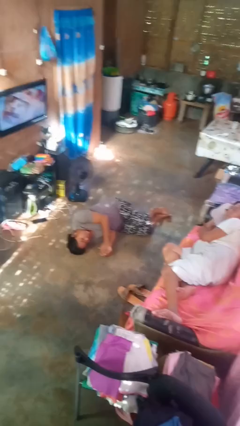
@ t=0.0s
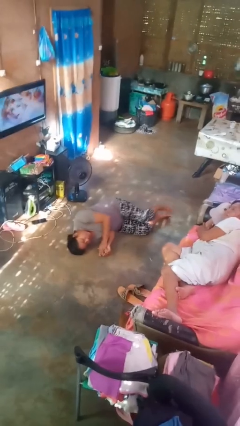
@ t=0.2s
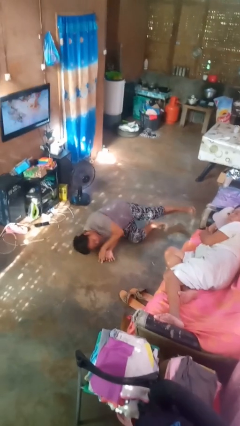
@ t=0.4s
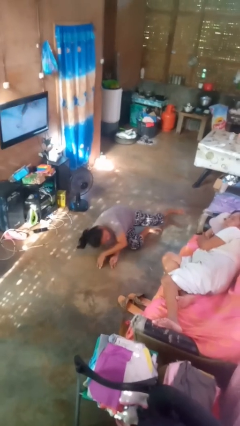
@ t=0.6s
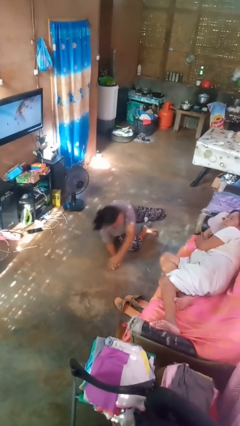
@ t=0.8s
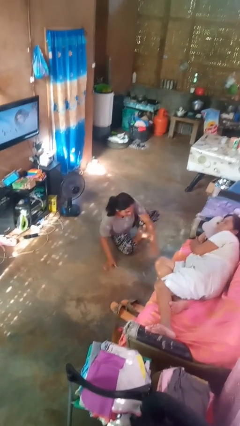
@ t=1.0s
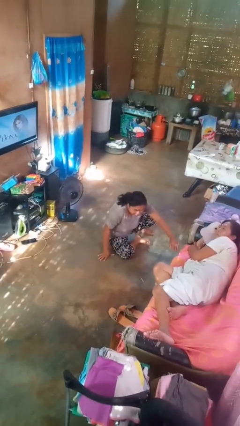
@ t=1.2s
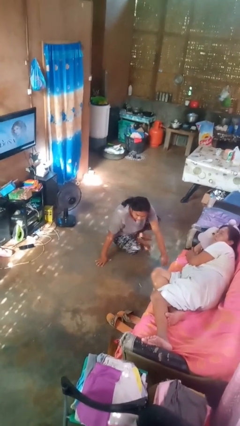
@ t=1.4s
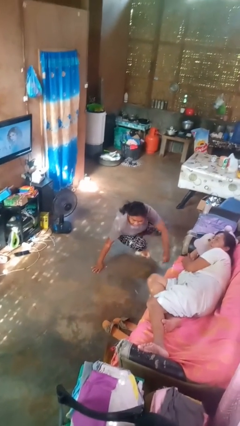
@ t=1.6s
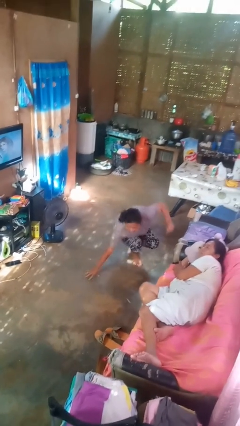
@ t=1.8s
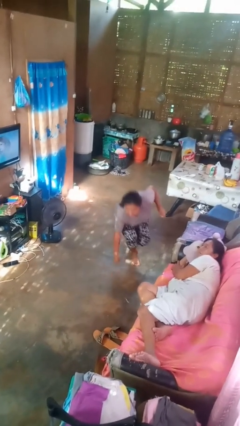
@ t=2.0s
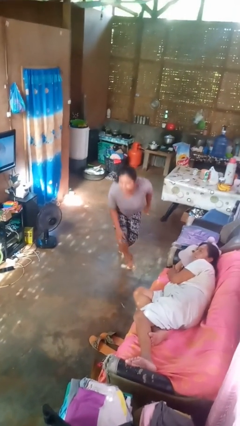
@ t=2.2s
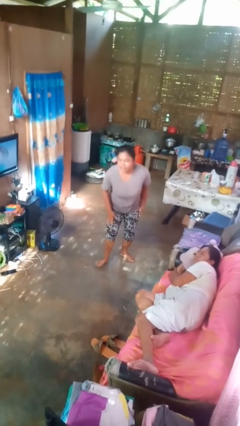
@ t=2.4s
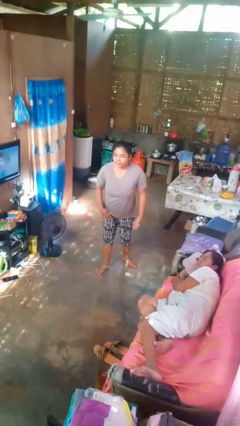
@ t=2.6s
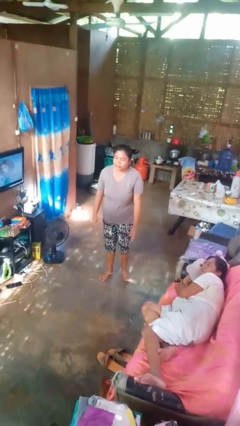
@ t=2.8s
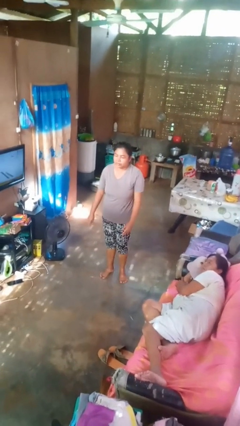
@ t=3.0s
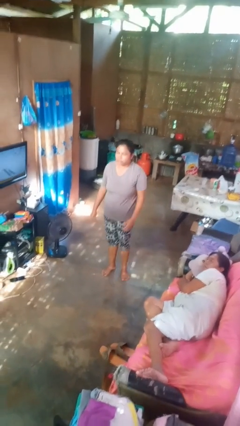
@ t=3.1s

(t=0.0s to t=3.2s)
person stands up from floor

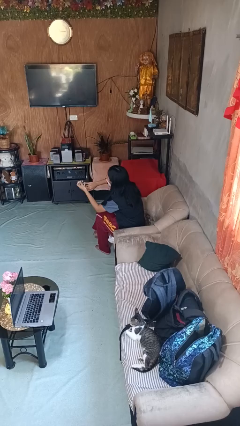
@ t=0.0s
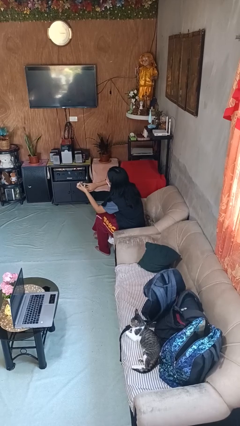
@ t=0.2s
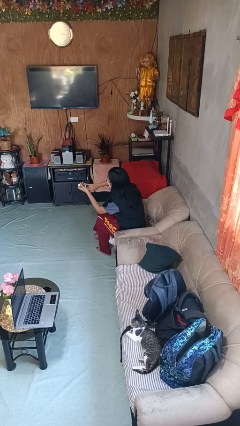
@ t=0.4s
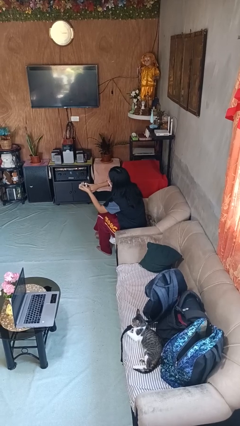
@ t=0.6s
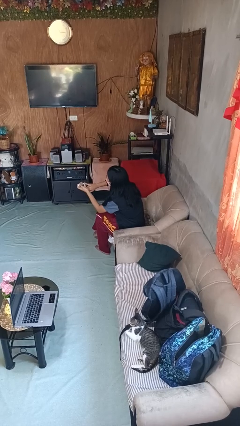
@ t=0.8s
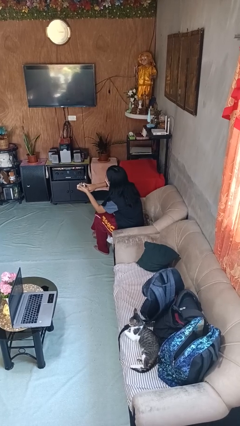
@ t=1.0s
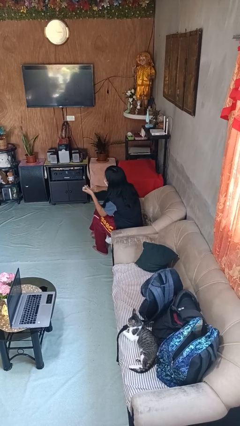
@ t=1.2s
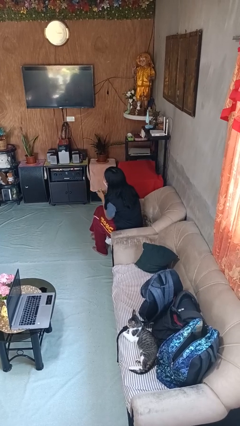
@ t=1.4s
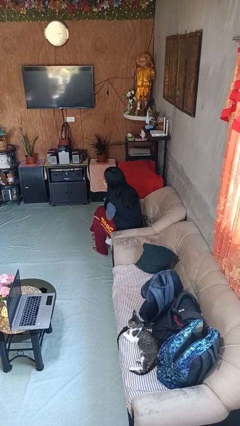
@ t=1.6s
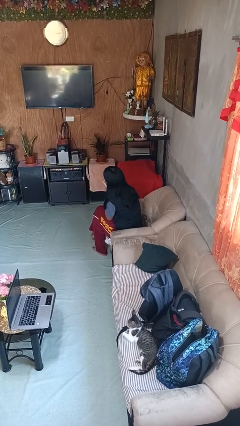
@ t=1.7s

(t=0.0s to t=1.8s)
person clips fingernails

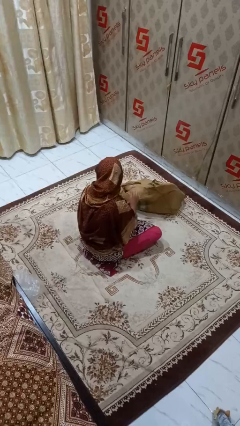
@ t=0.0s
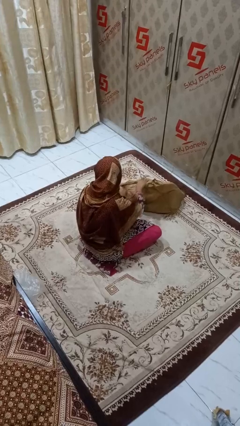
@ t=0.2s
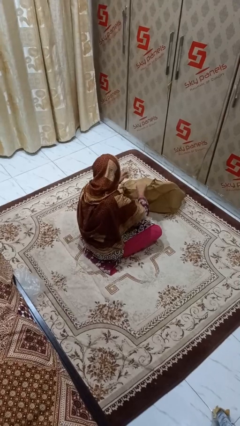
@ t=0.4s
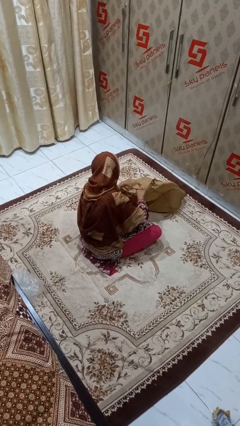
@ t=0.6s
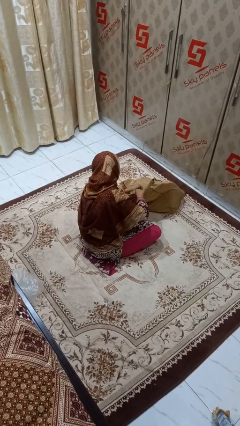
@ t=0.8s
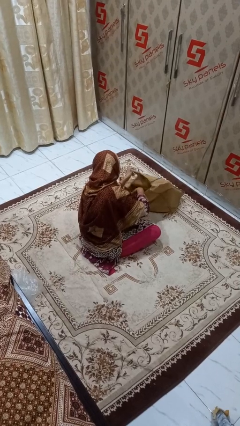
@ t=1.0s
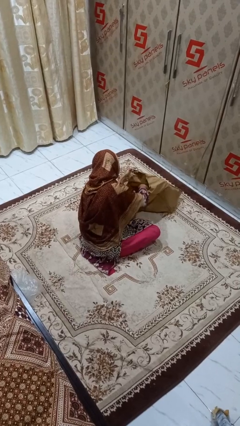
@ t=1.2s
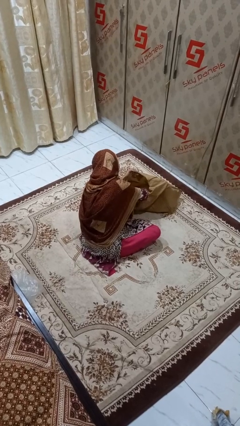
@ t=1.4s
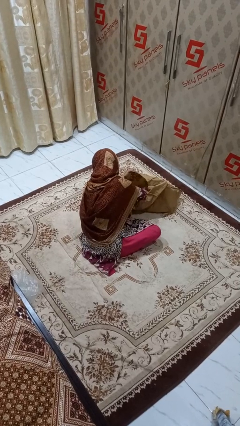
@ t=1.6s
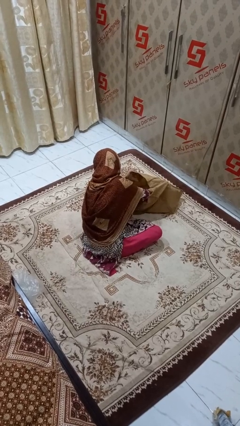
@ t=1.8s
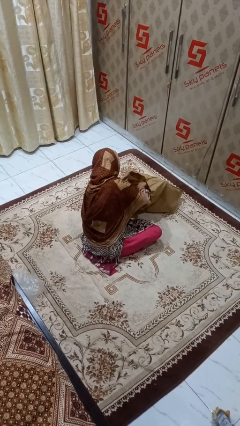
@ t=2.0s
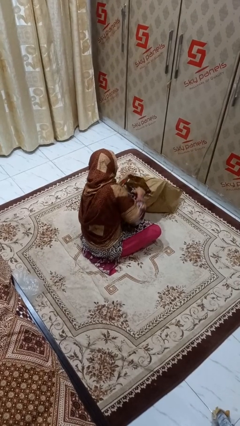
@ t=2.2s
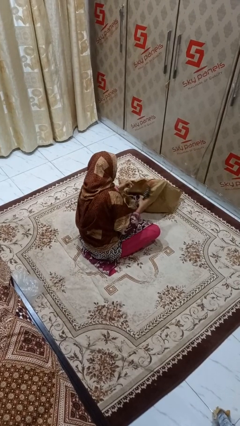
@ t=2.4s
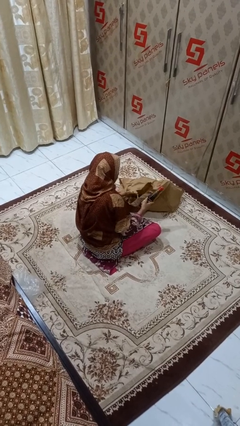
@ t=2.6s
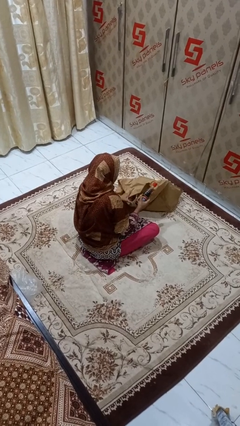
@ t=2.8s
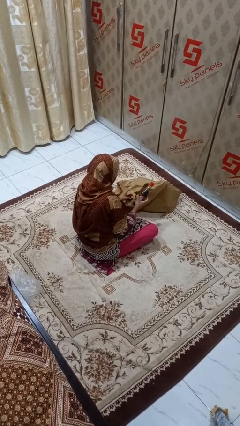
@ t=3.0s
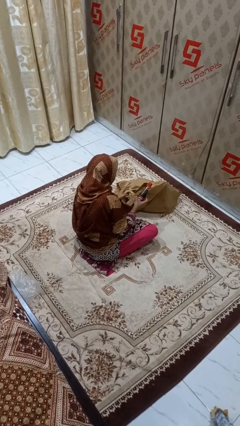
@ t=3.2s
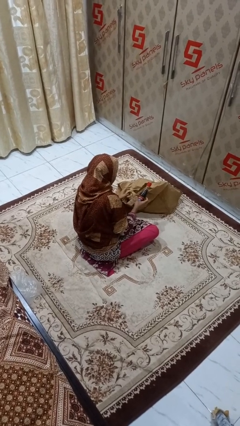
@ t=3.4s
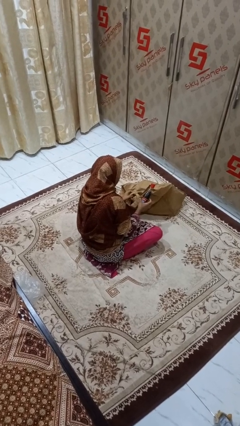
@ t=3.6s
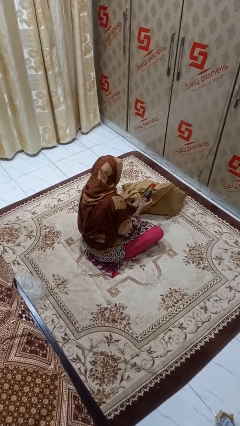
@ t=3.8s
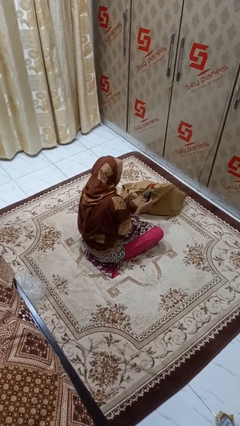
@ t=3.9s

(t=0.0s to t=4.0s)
person takes object from bag

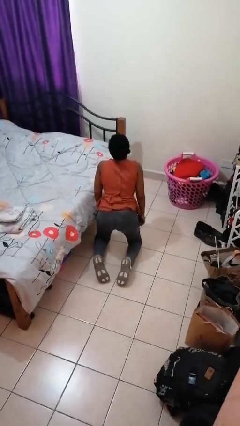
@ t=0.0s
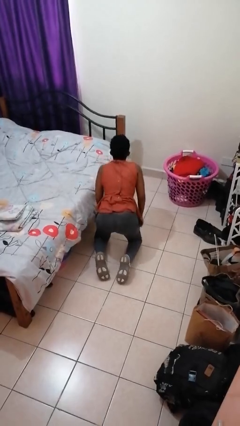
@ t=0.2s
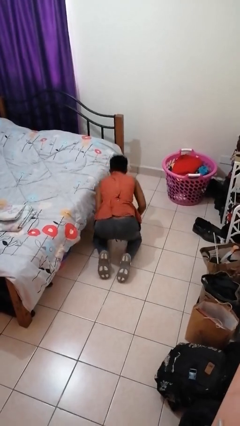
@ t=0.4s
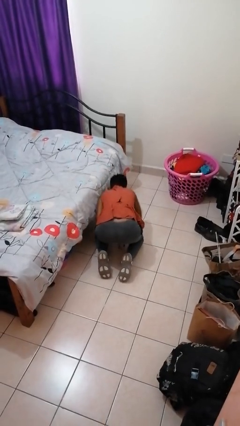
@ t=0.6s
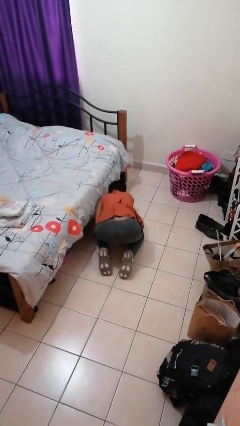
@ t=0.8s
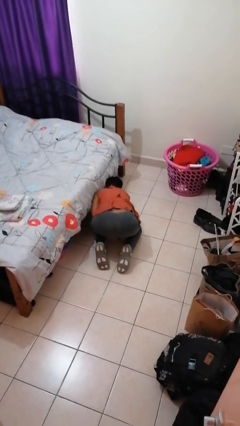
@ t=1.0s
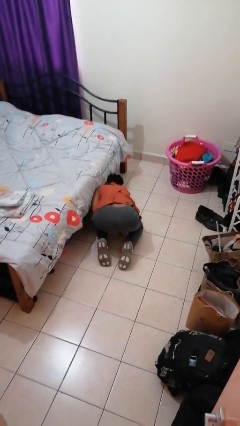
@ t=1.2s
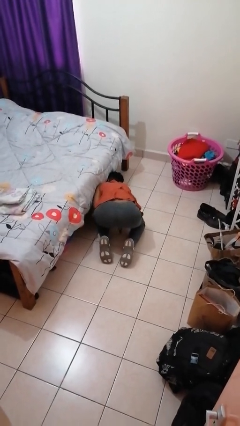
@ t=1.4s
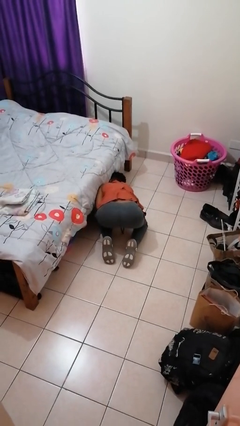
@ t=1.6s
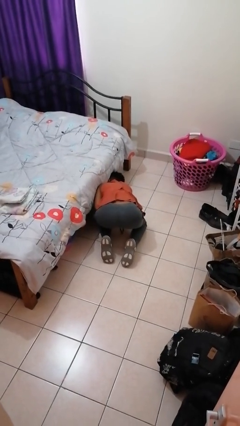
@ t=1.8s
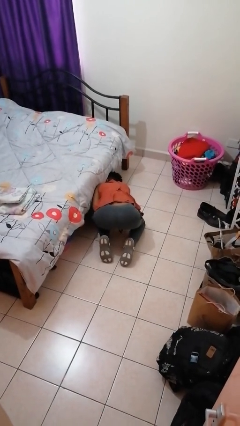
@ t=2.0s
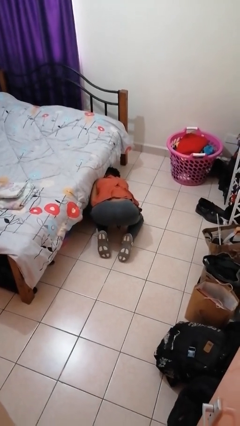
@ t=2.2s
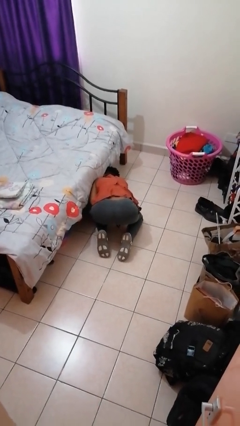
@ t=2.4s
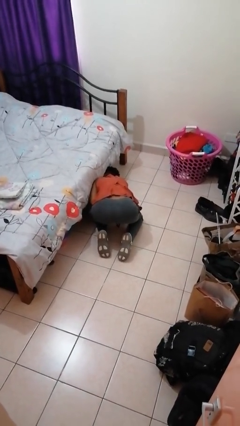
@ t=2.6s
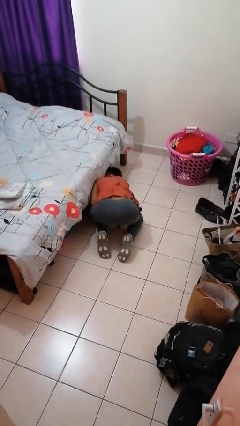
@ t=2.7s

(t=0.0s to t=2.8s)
person searches under bed

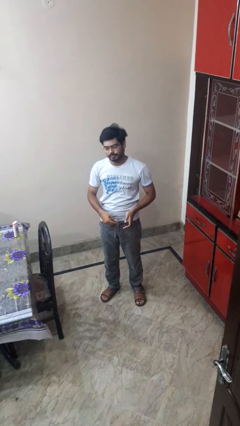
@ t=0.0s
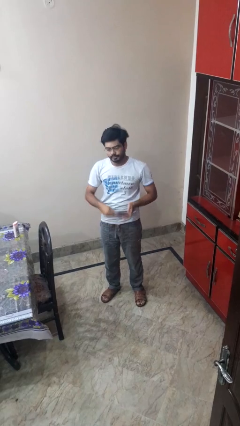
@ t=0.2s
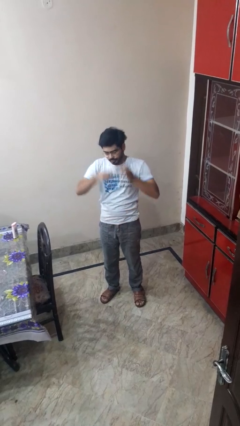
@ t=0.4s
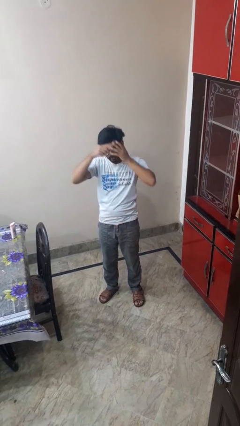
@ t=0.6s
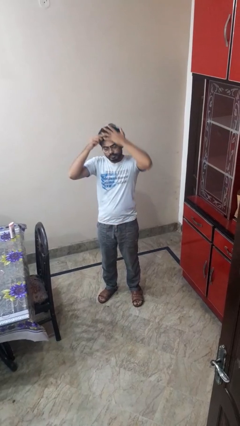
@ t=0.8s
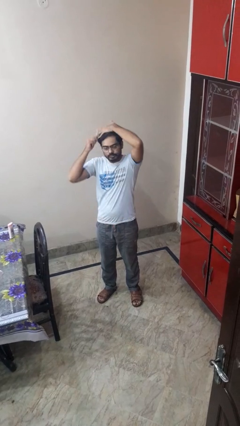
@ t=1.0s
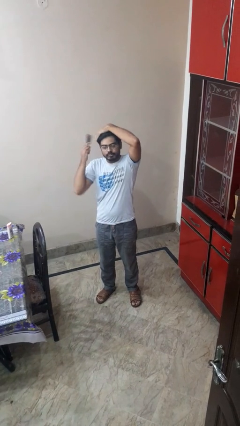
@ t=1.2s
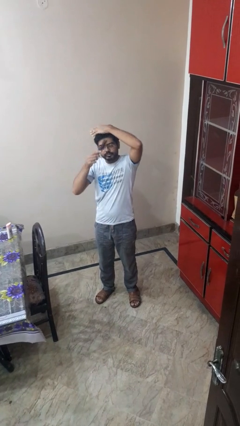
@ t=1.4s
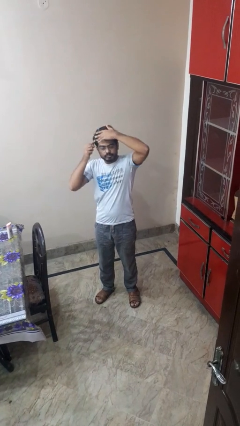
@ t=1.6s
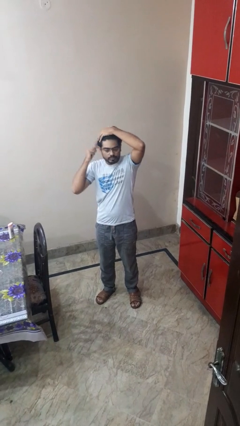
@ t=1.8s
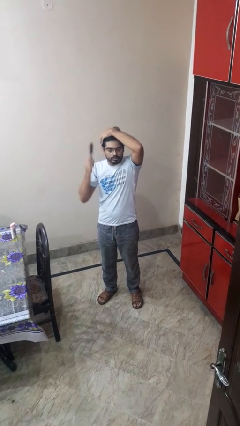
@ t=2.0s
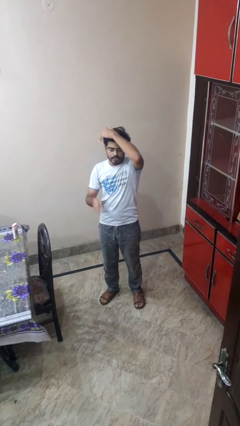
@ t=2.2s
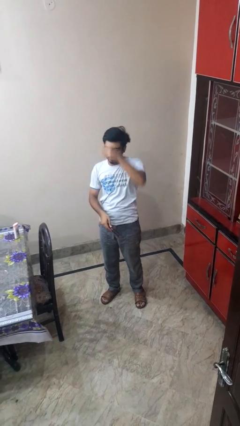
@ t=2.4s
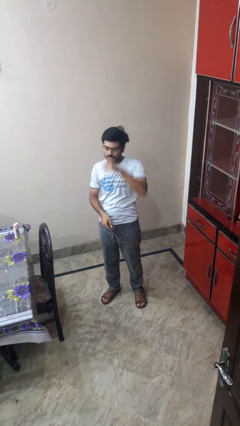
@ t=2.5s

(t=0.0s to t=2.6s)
person brushes hair

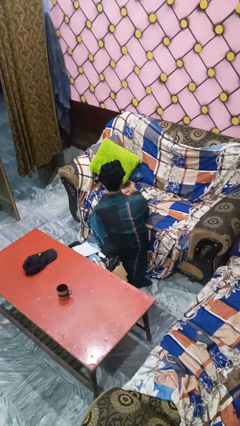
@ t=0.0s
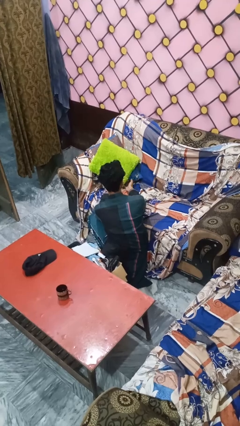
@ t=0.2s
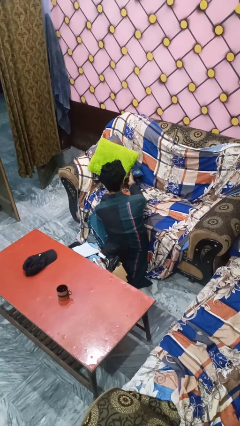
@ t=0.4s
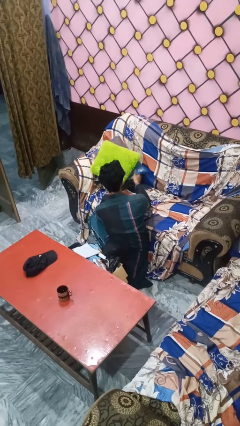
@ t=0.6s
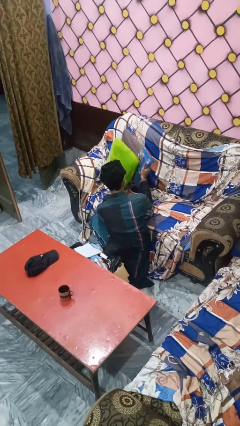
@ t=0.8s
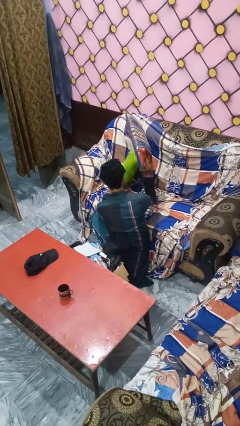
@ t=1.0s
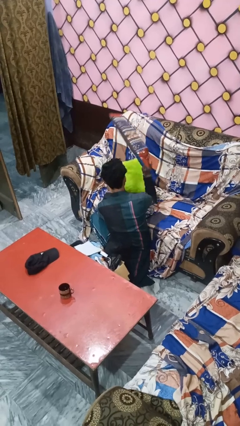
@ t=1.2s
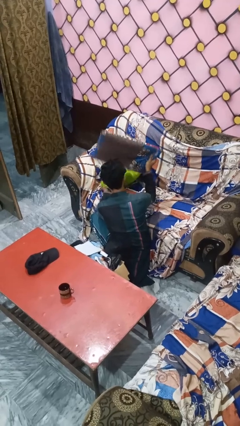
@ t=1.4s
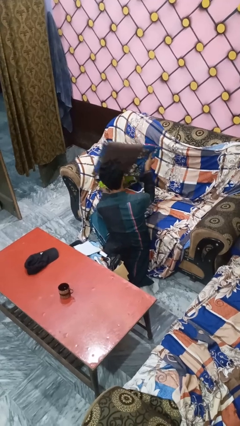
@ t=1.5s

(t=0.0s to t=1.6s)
person searches in couch

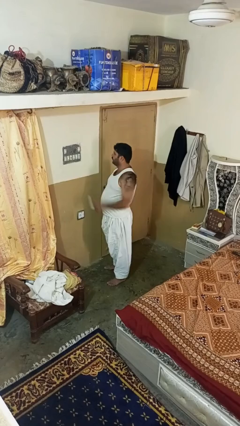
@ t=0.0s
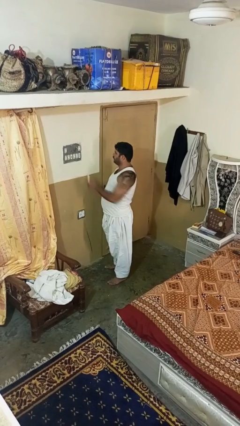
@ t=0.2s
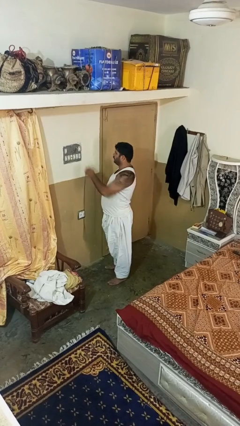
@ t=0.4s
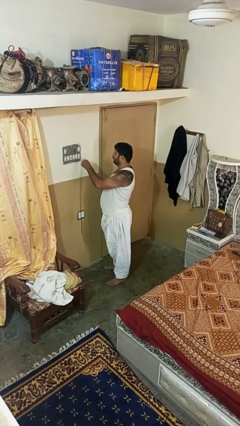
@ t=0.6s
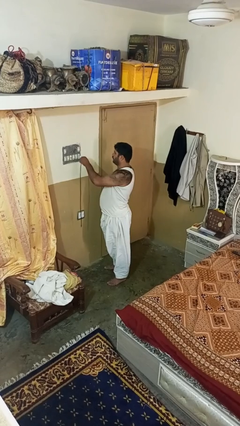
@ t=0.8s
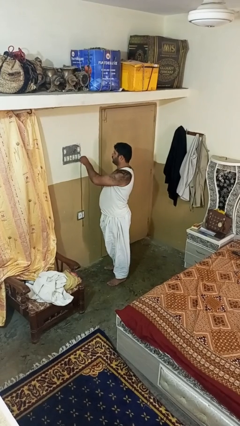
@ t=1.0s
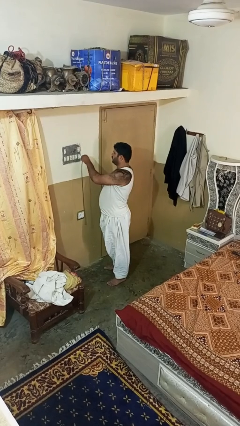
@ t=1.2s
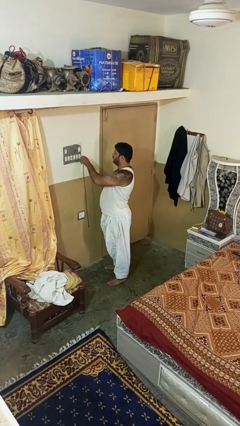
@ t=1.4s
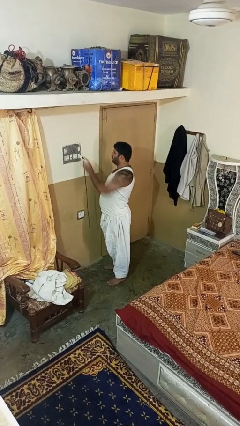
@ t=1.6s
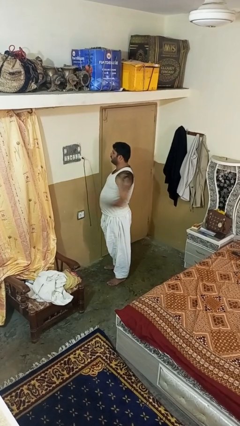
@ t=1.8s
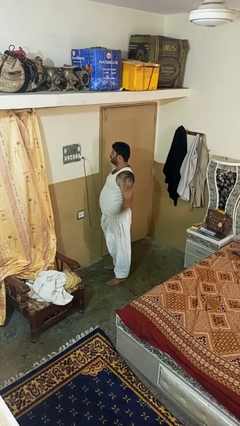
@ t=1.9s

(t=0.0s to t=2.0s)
person plugs into electrical socket
